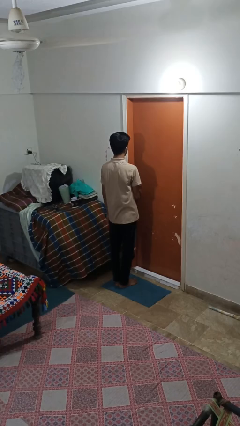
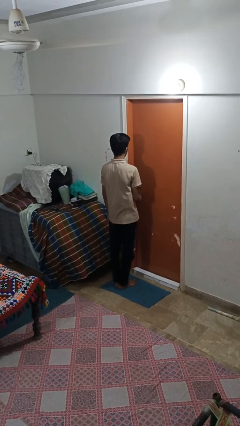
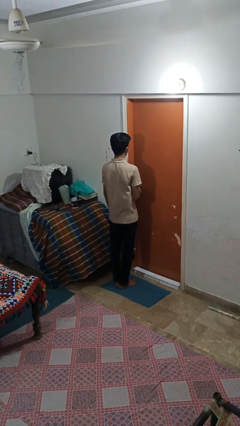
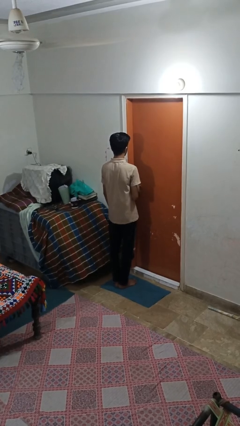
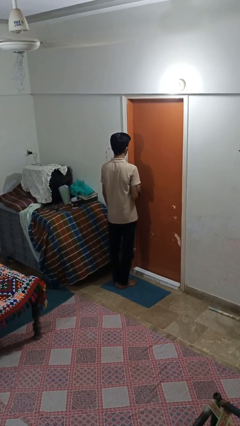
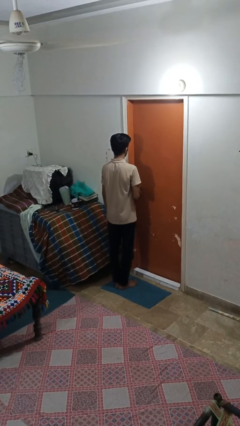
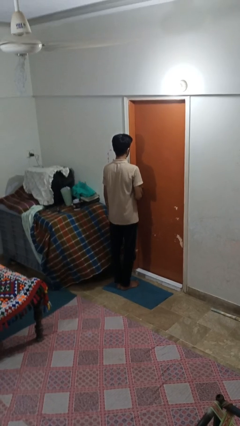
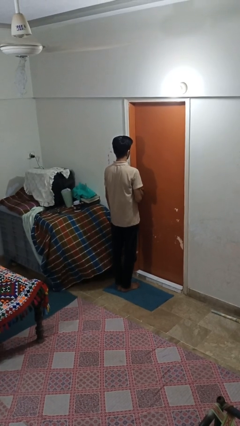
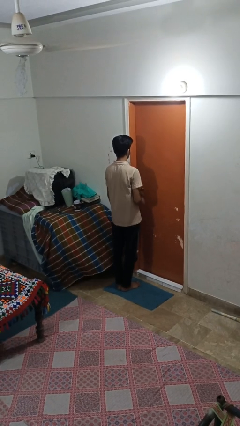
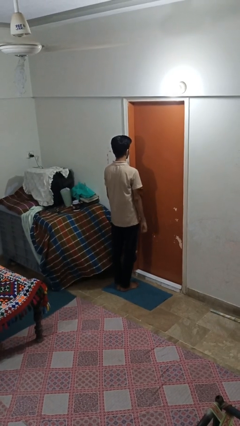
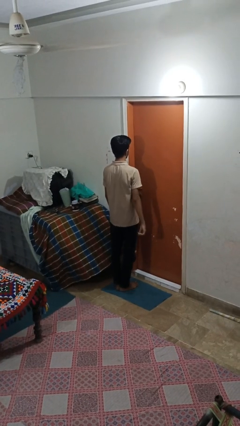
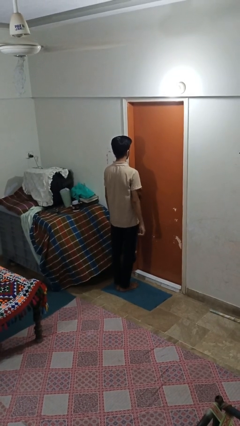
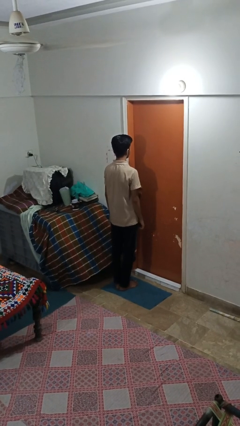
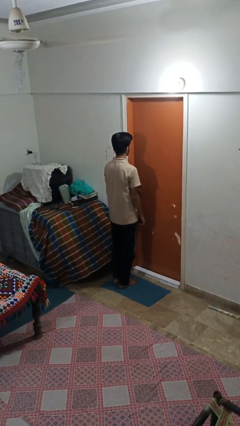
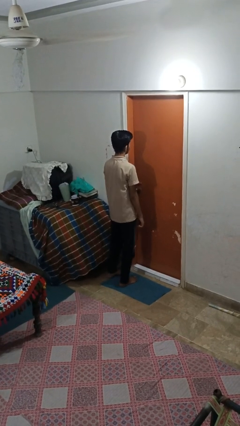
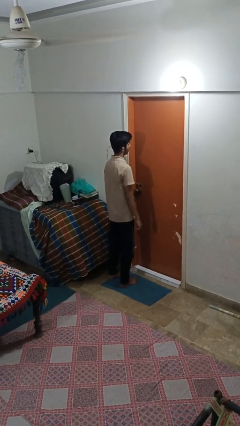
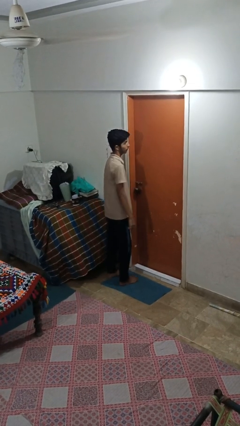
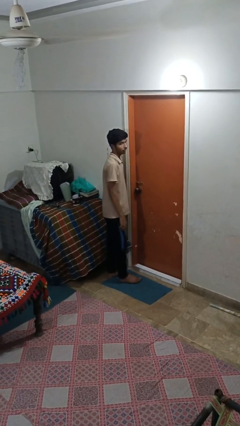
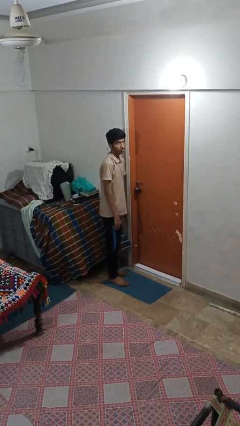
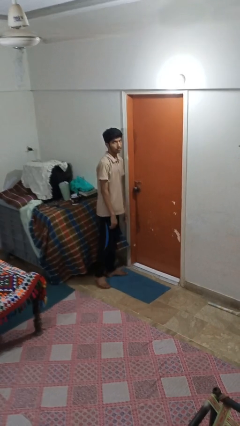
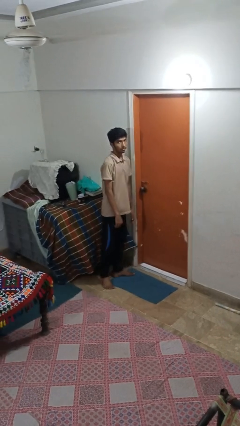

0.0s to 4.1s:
person locks door with keys

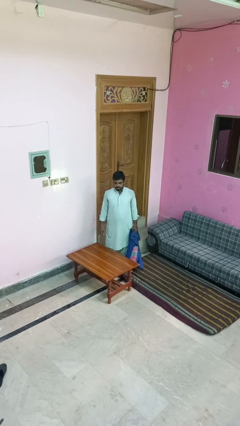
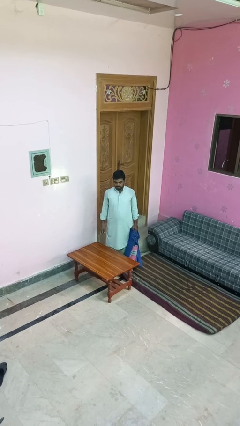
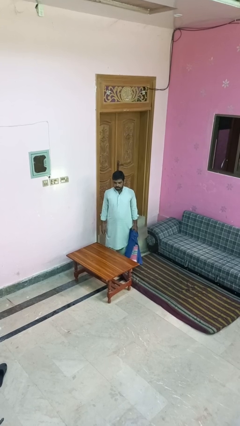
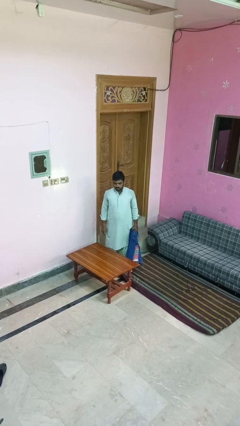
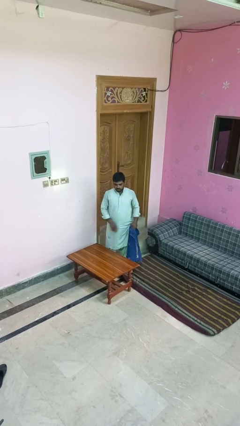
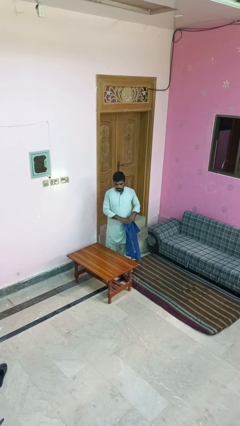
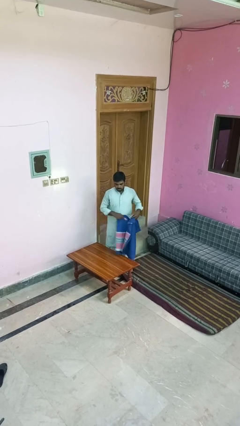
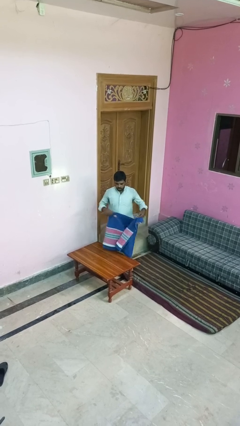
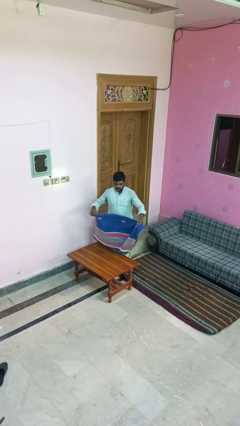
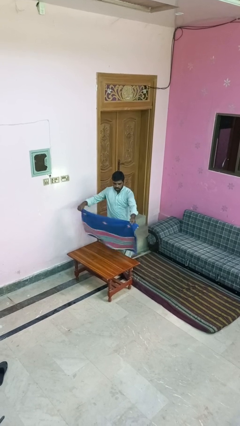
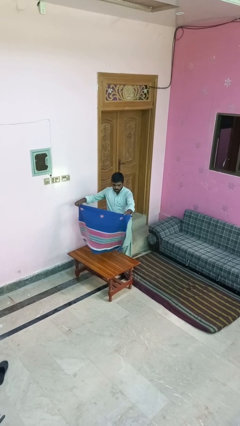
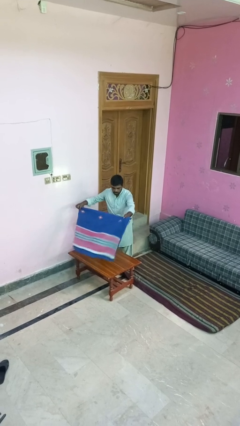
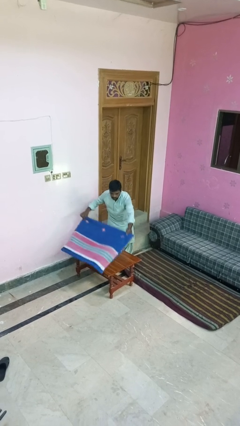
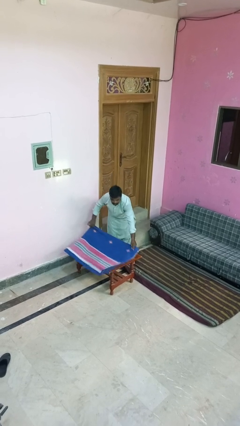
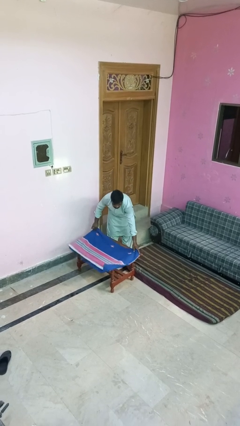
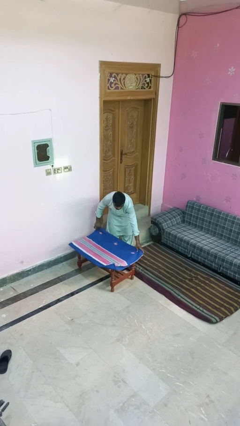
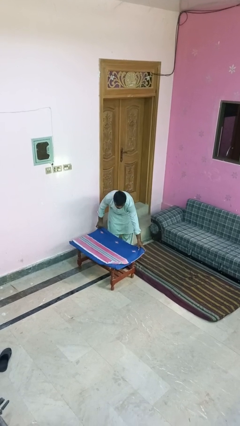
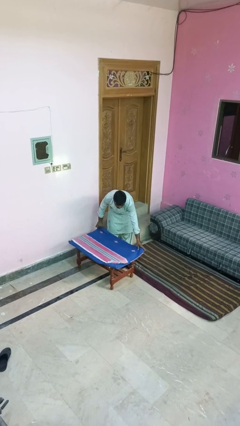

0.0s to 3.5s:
person spreads tablecloth

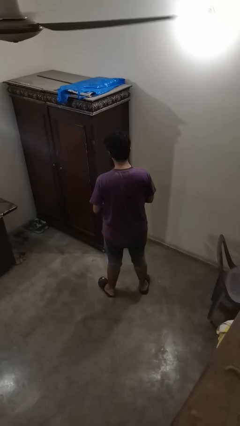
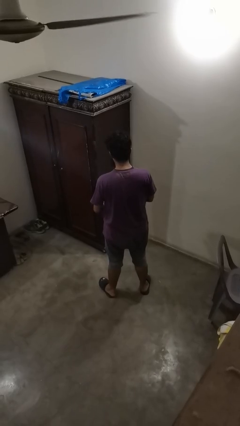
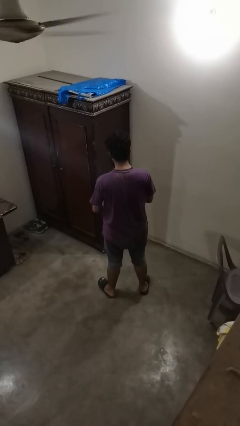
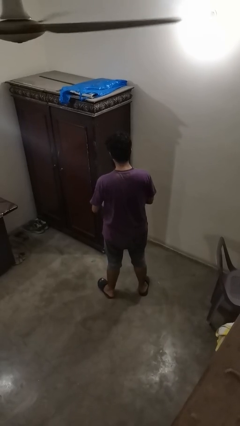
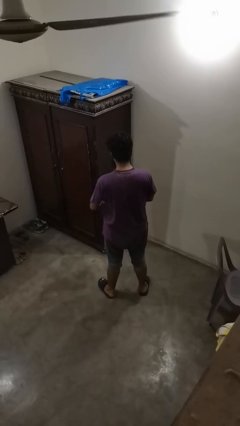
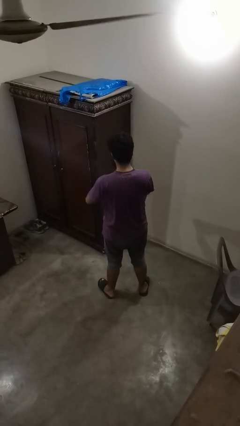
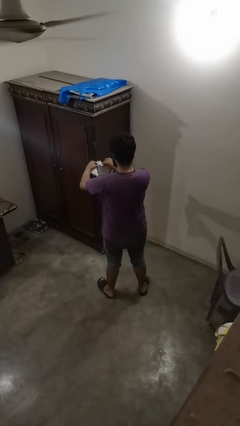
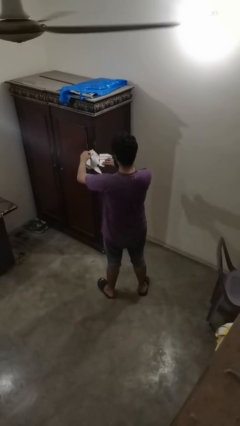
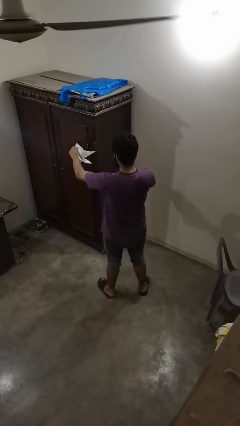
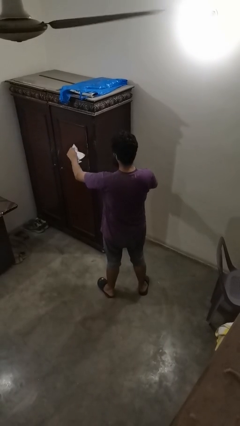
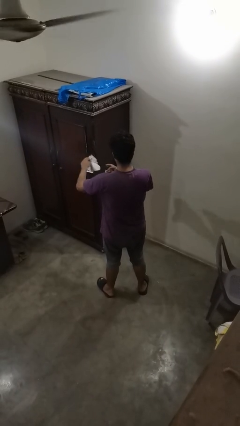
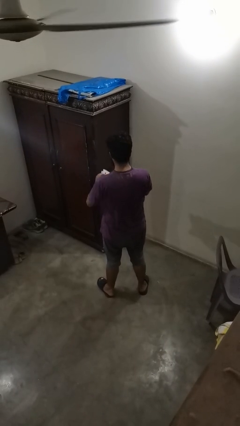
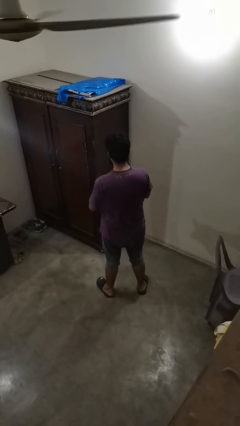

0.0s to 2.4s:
person tears paper

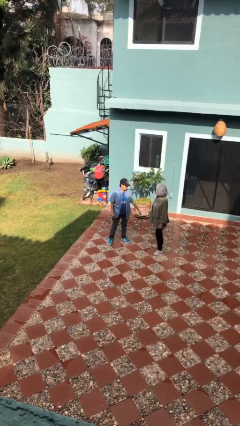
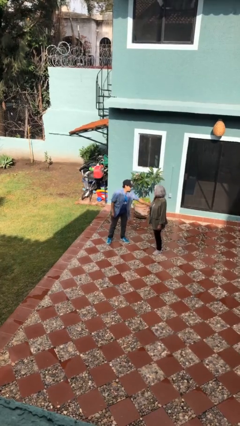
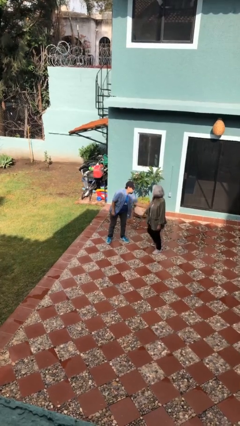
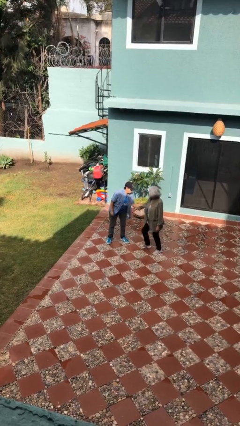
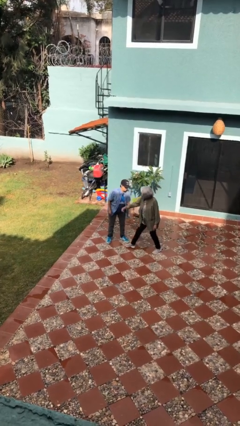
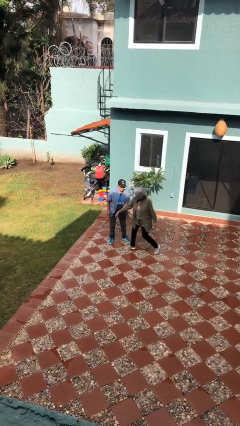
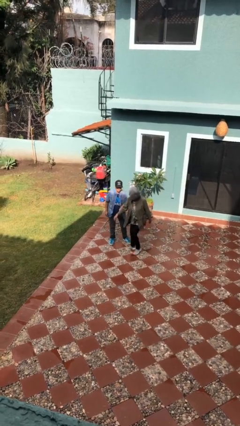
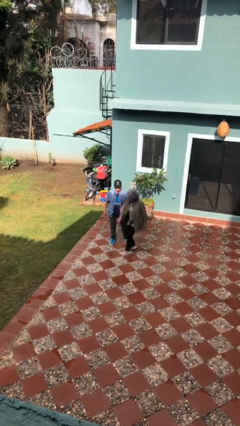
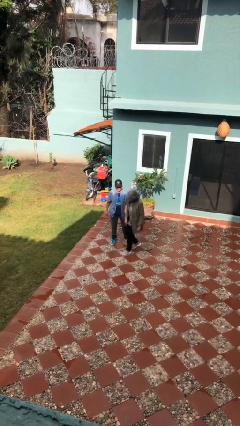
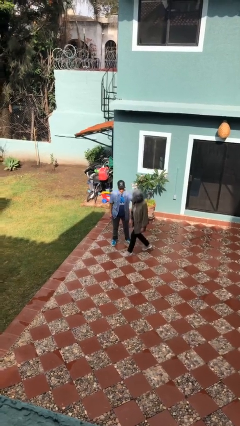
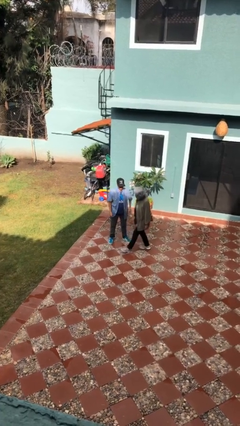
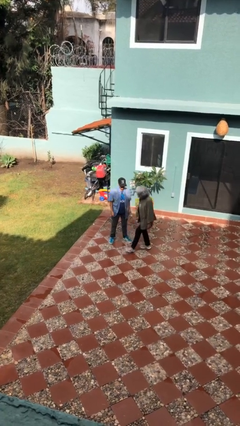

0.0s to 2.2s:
person grabs person by forearm

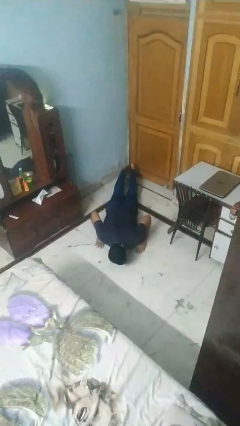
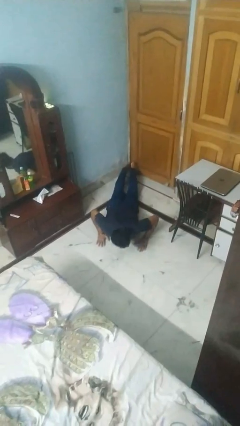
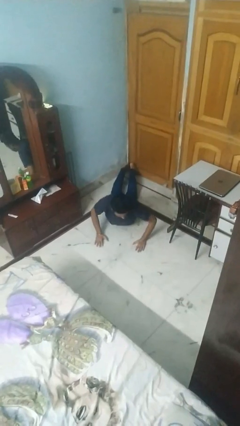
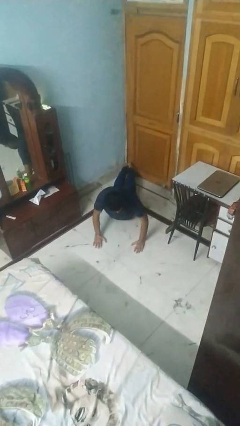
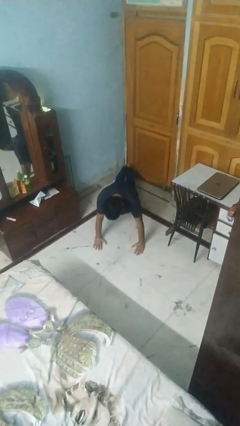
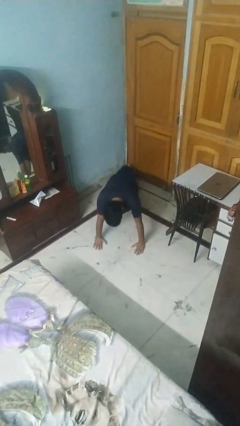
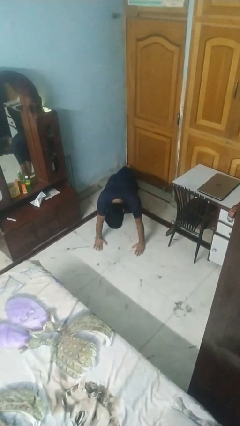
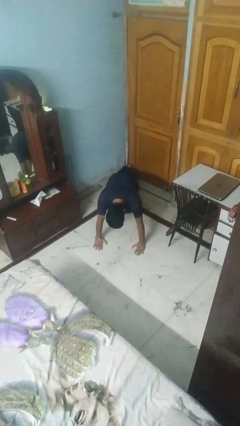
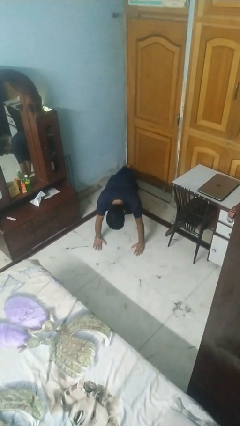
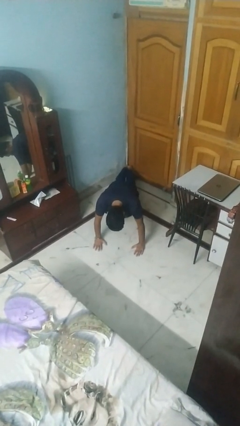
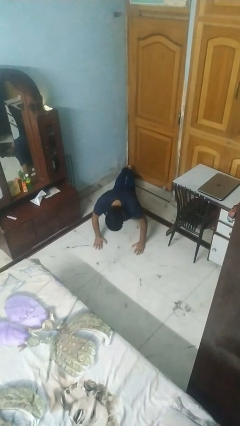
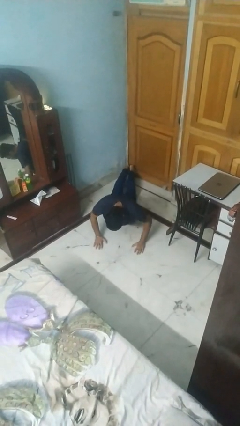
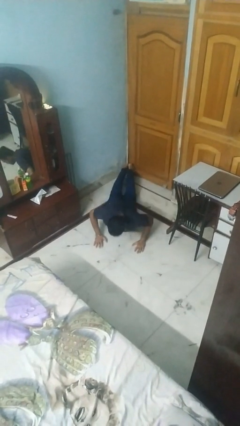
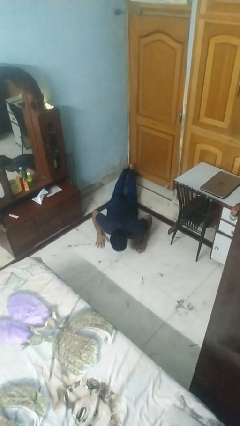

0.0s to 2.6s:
person exercises with pushup

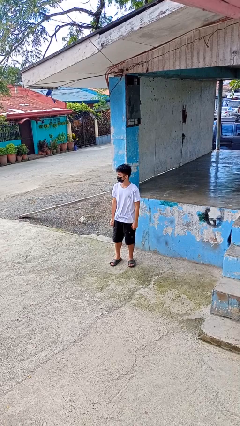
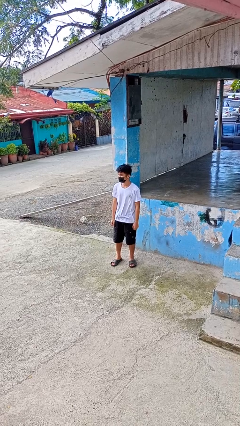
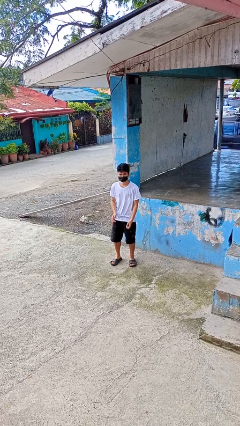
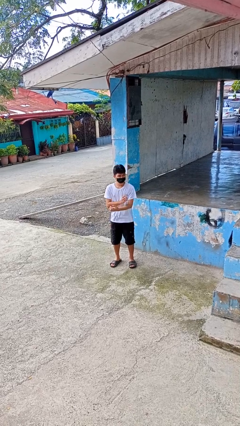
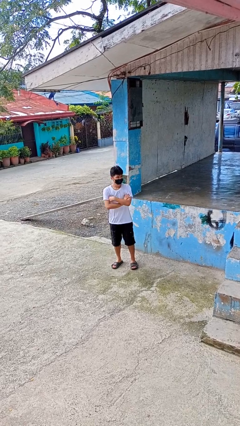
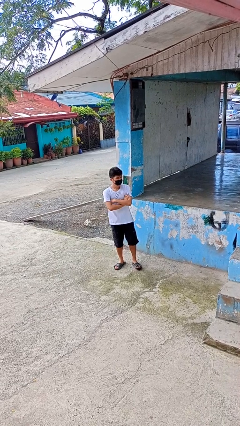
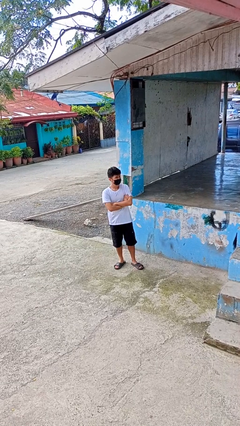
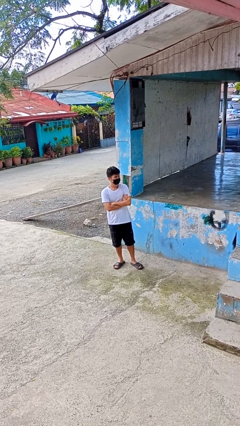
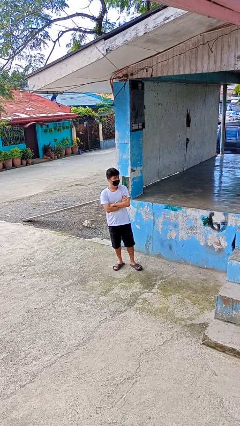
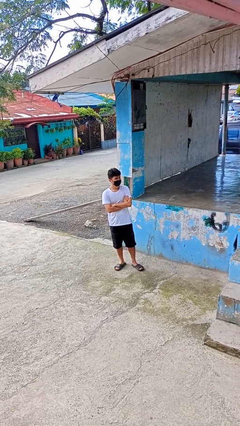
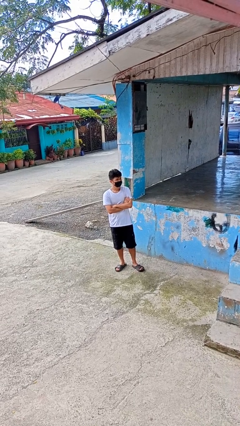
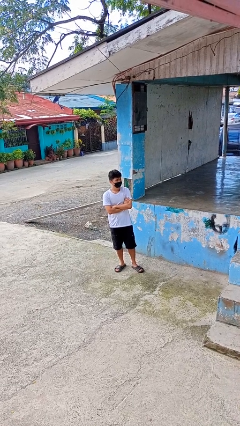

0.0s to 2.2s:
person crosses arms

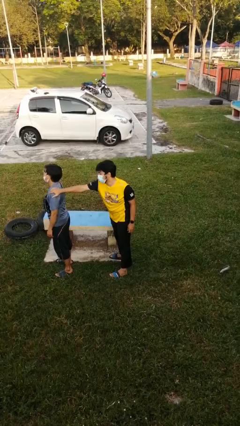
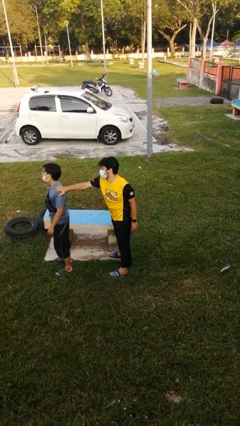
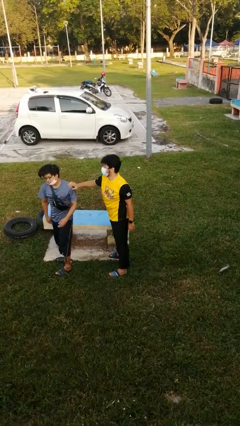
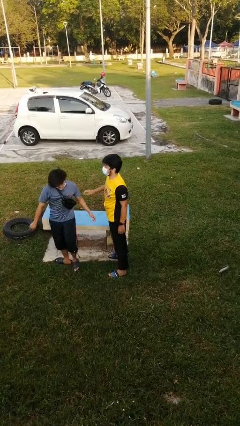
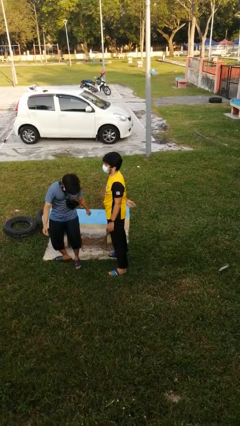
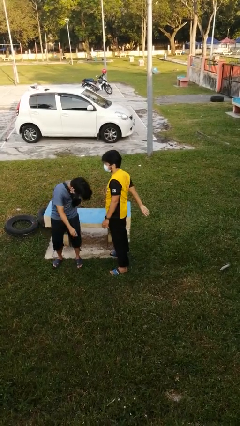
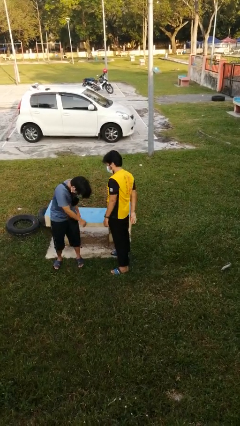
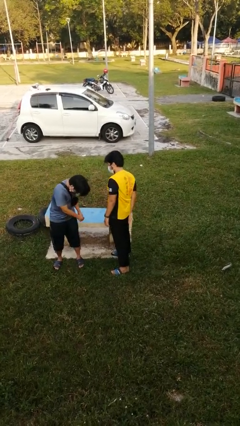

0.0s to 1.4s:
person spins person around
